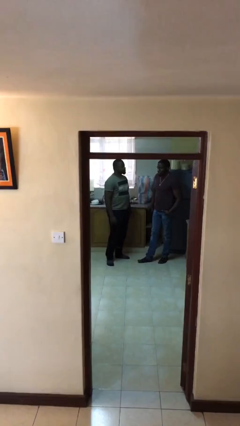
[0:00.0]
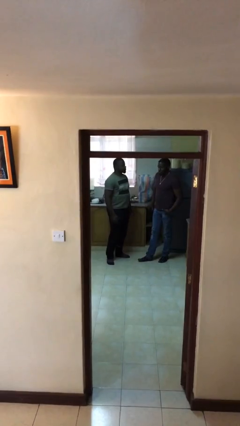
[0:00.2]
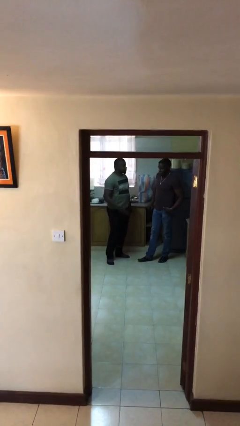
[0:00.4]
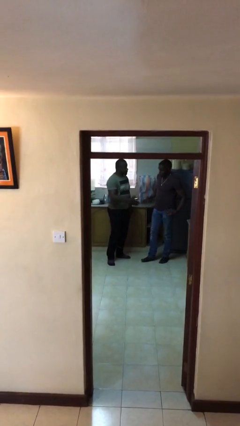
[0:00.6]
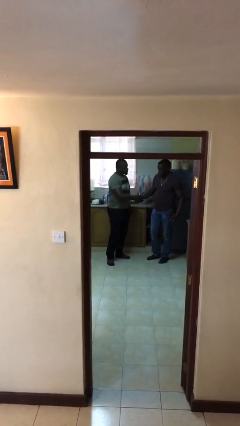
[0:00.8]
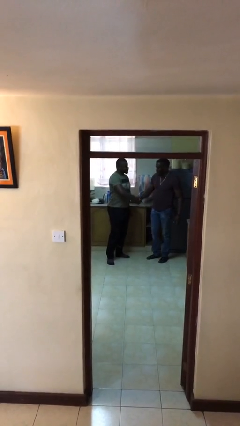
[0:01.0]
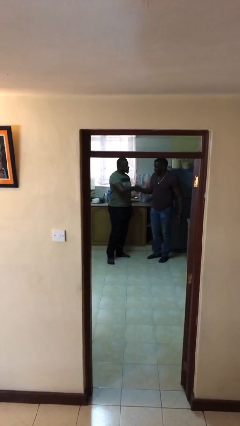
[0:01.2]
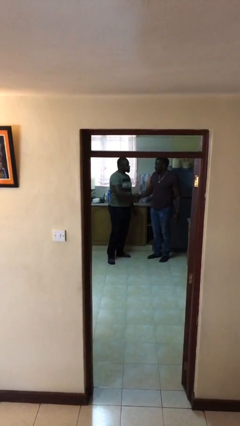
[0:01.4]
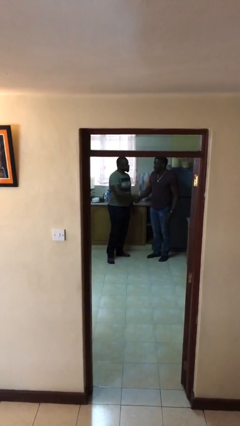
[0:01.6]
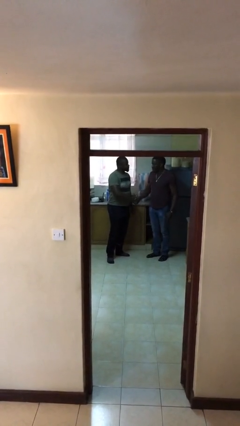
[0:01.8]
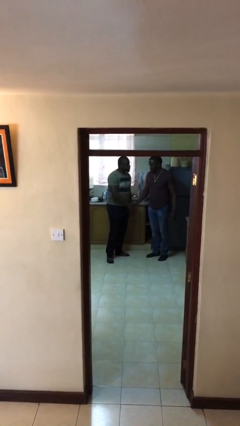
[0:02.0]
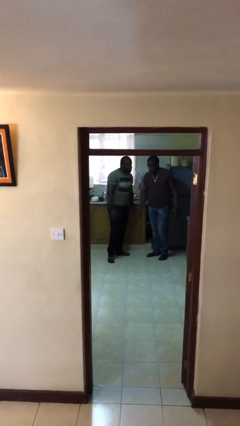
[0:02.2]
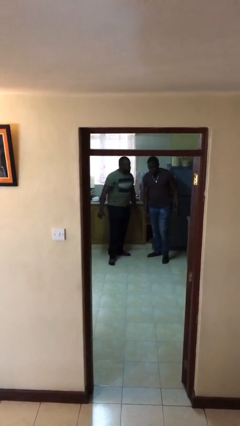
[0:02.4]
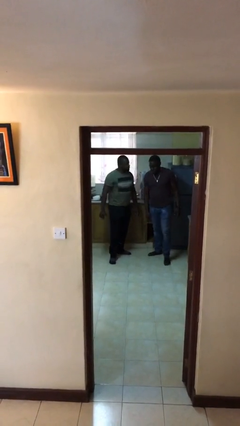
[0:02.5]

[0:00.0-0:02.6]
person shakes hand

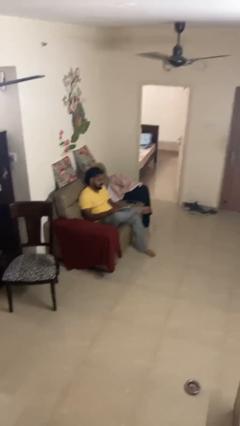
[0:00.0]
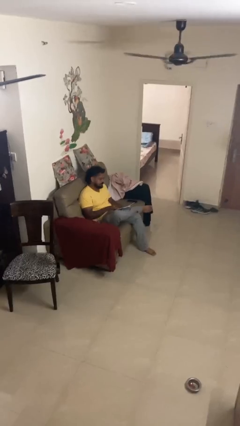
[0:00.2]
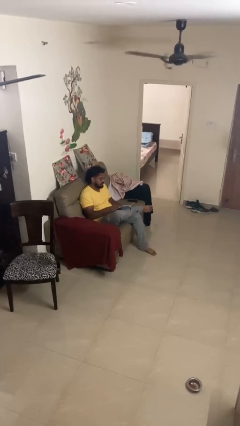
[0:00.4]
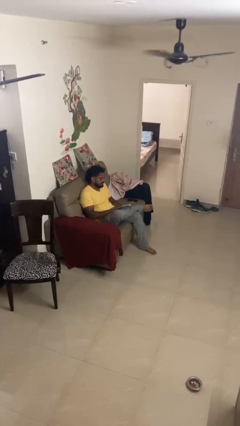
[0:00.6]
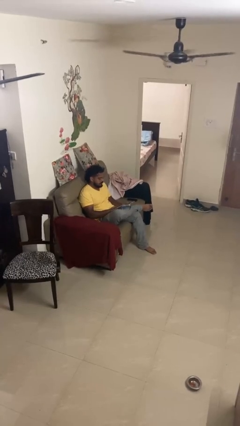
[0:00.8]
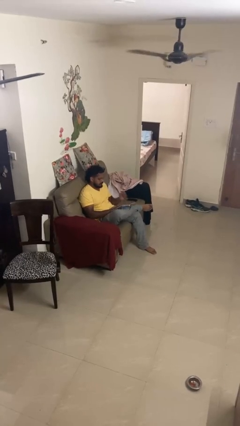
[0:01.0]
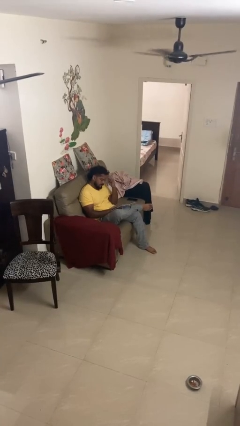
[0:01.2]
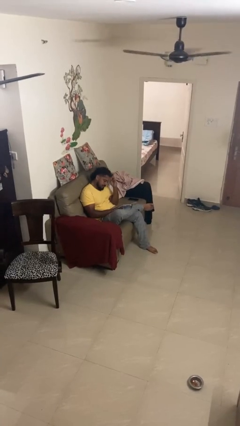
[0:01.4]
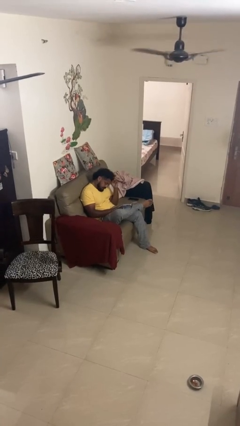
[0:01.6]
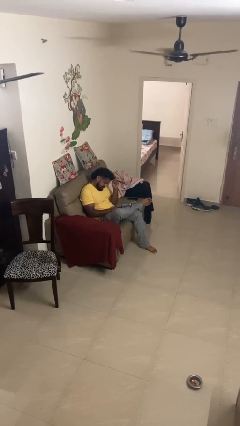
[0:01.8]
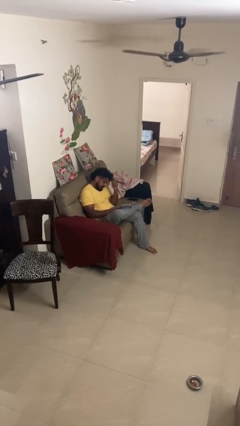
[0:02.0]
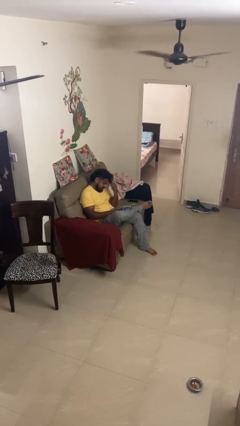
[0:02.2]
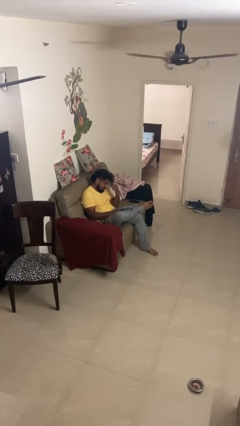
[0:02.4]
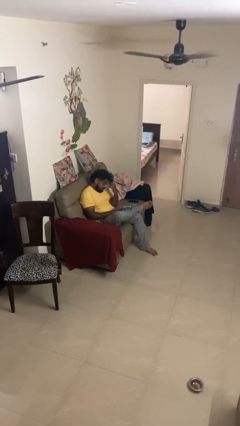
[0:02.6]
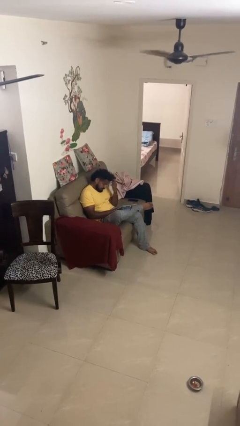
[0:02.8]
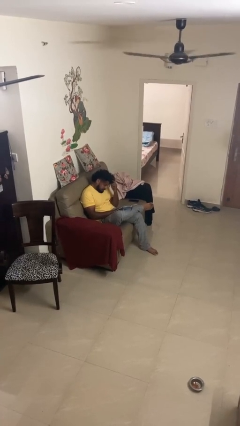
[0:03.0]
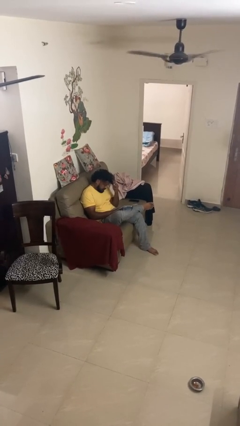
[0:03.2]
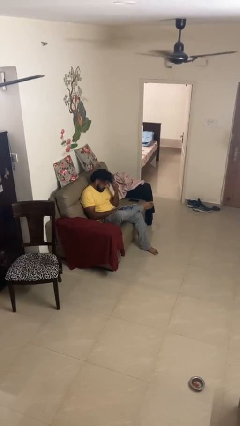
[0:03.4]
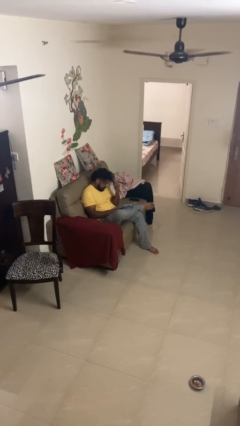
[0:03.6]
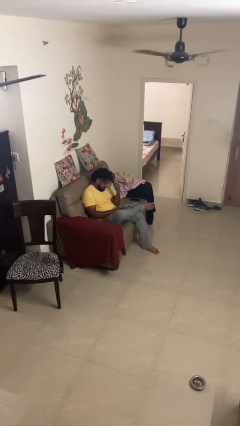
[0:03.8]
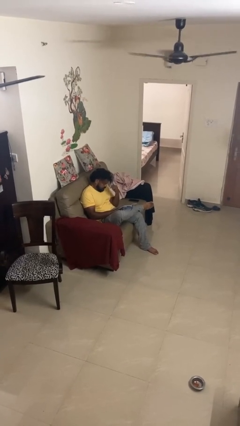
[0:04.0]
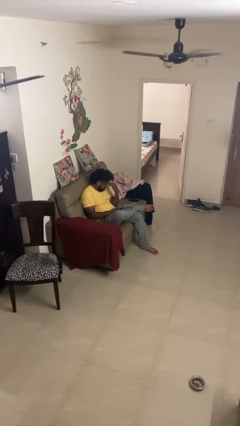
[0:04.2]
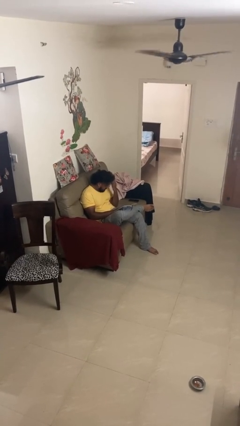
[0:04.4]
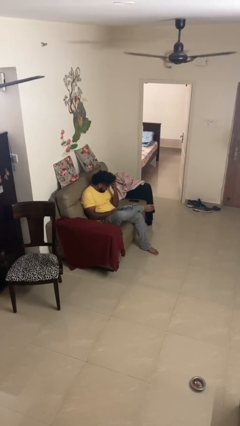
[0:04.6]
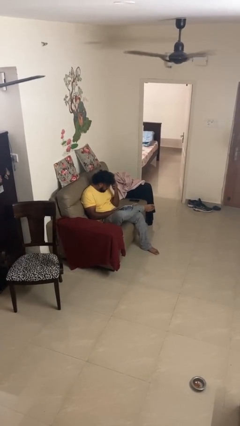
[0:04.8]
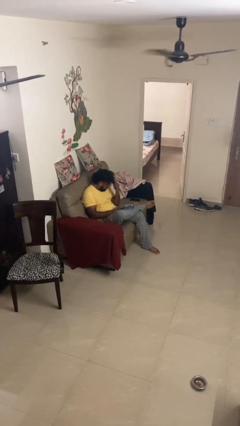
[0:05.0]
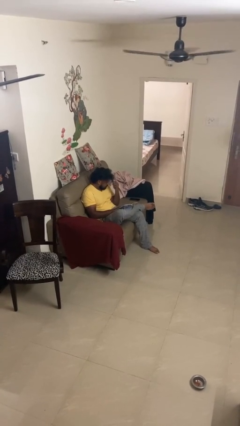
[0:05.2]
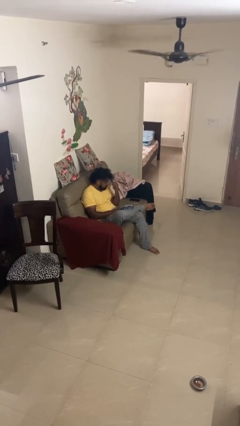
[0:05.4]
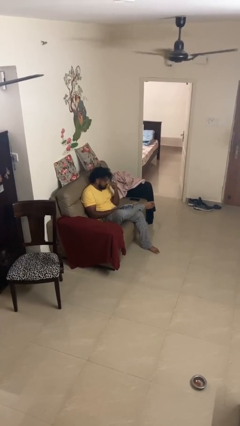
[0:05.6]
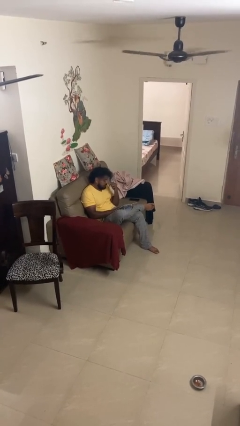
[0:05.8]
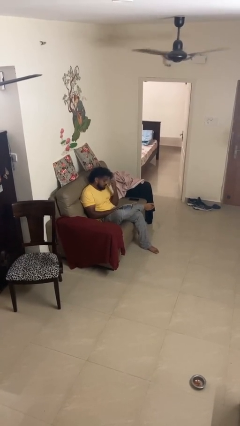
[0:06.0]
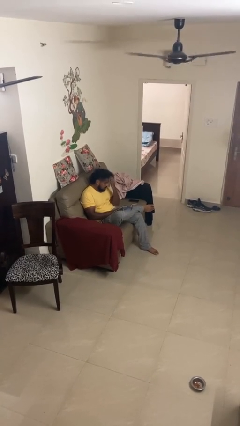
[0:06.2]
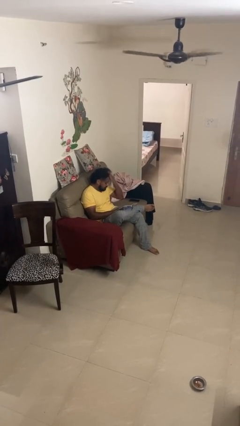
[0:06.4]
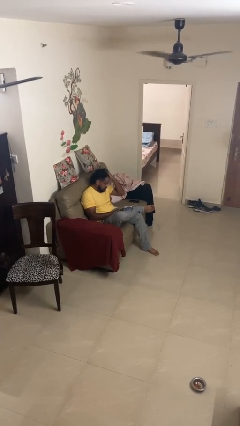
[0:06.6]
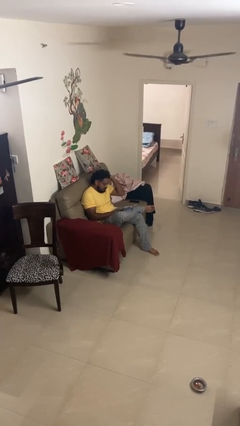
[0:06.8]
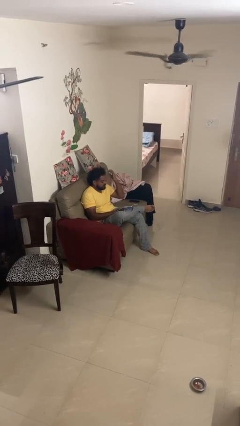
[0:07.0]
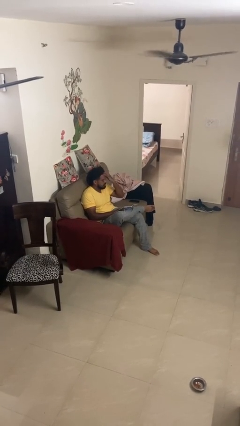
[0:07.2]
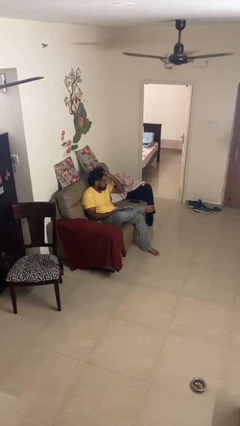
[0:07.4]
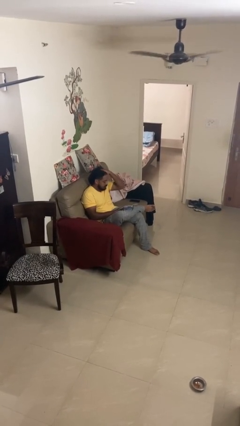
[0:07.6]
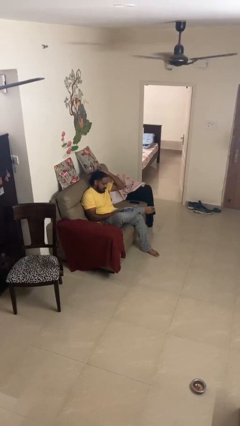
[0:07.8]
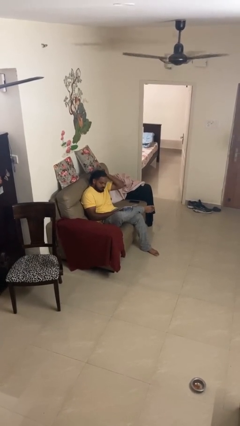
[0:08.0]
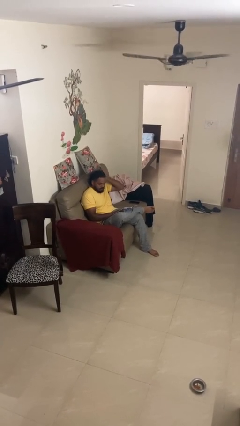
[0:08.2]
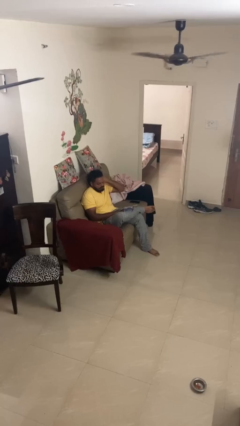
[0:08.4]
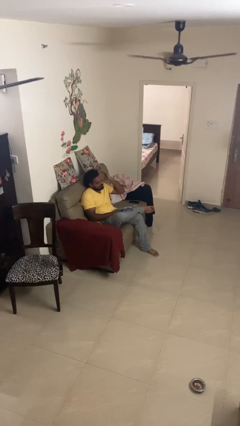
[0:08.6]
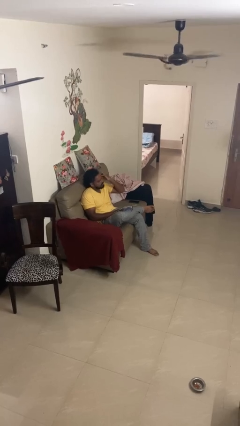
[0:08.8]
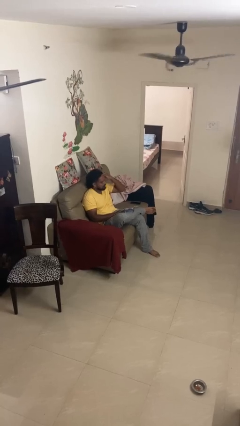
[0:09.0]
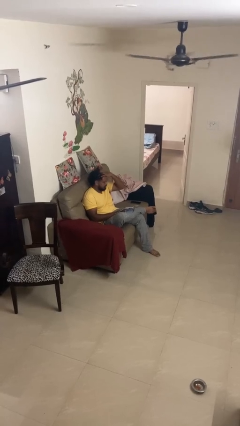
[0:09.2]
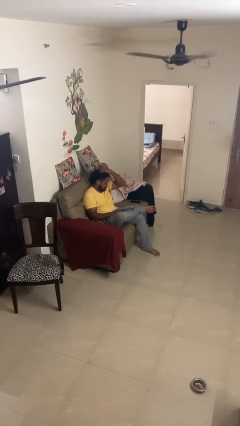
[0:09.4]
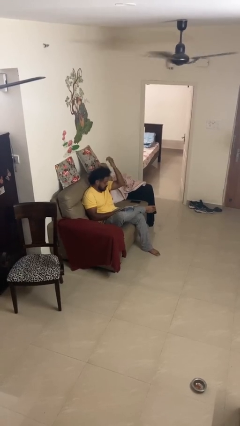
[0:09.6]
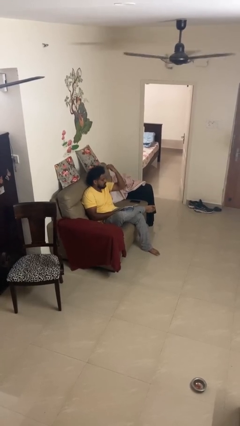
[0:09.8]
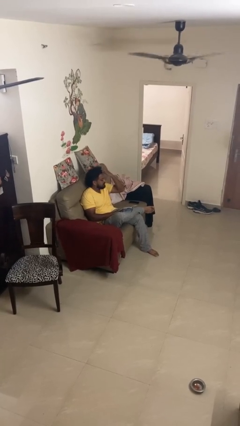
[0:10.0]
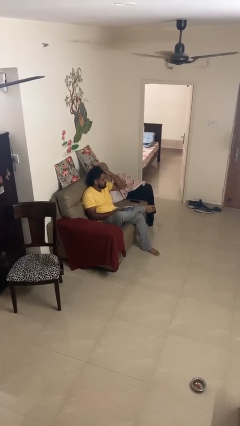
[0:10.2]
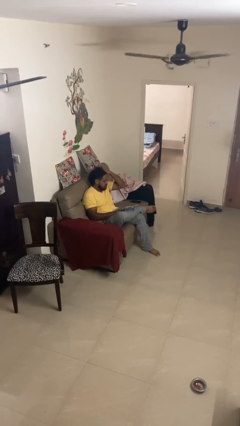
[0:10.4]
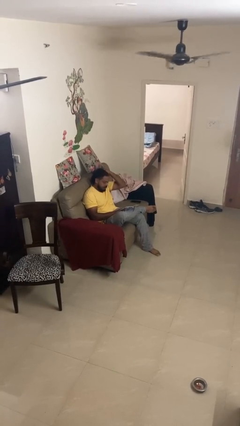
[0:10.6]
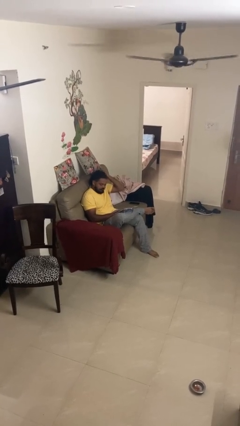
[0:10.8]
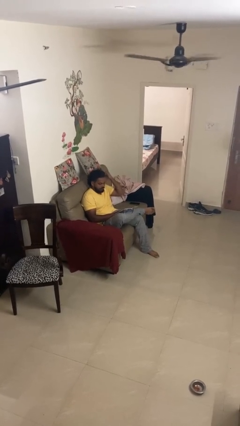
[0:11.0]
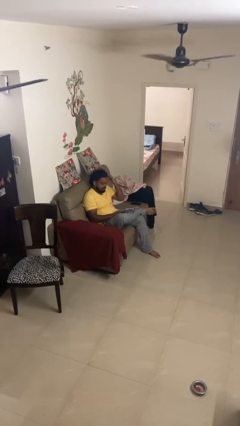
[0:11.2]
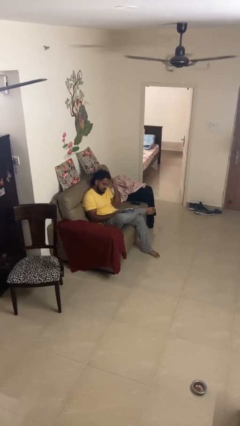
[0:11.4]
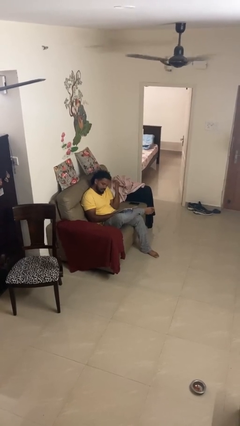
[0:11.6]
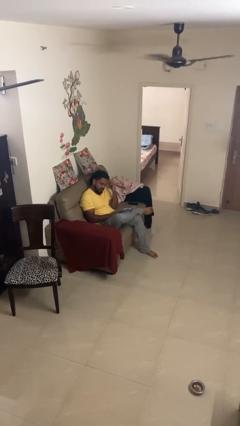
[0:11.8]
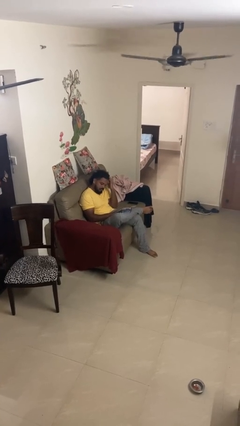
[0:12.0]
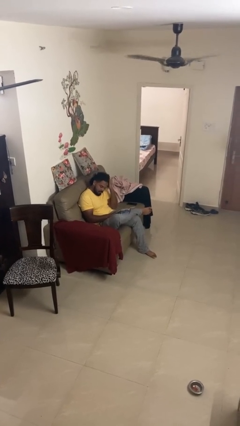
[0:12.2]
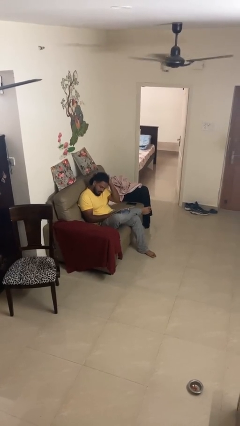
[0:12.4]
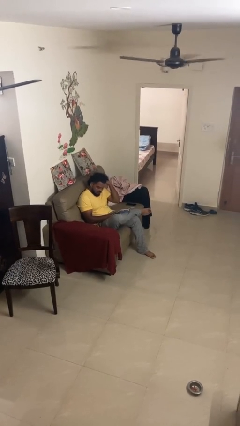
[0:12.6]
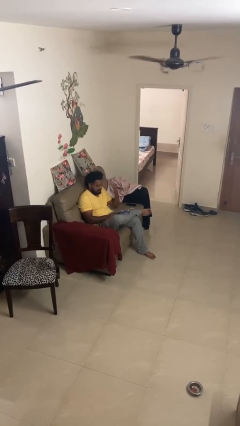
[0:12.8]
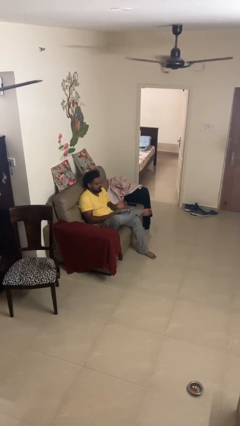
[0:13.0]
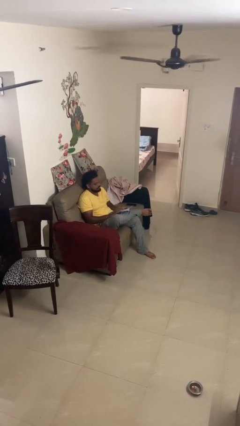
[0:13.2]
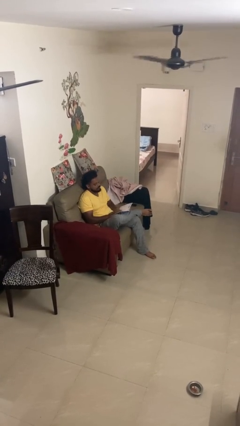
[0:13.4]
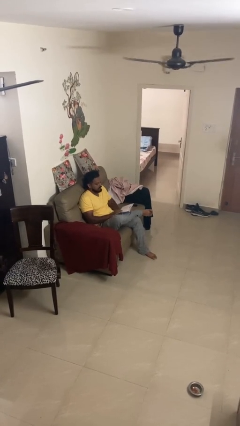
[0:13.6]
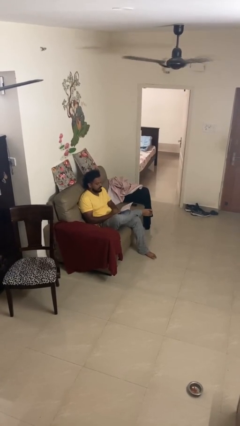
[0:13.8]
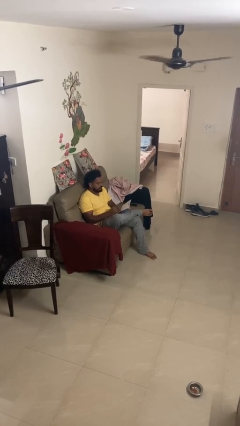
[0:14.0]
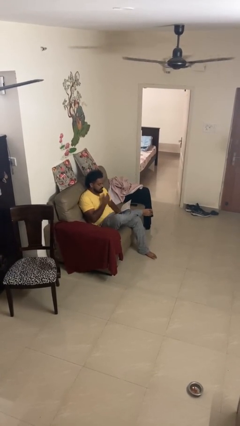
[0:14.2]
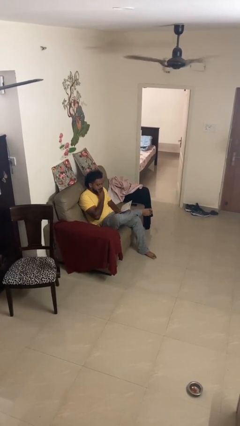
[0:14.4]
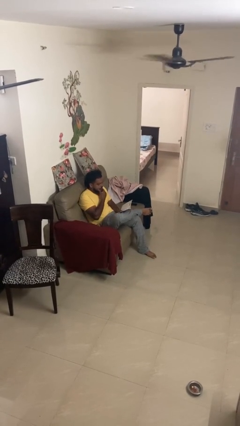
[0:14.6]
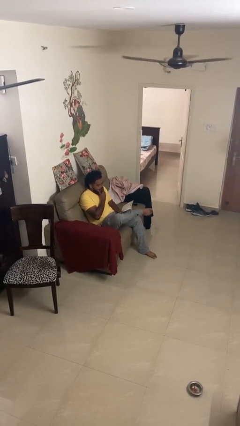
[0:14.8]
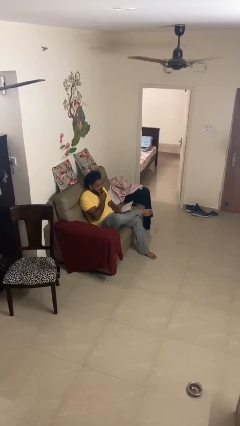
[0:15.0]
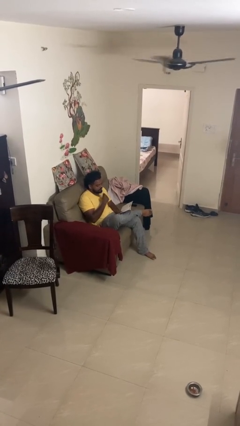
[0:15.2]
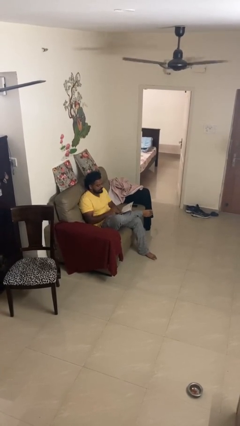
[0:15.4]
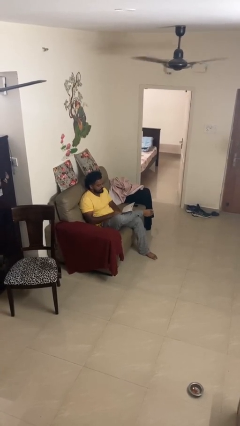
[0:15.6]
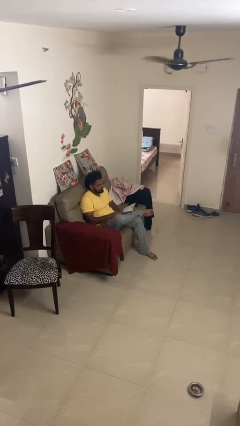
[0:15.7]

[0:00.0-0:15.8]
person reads document
